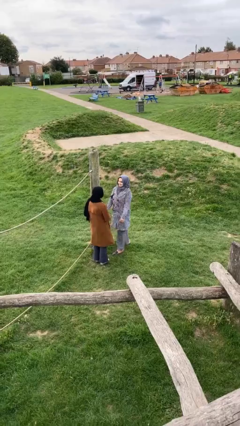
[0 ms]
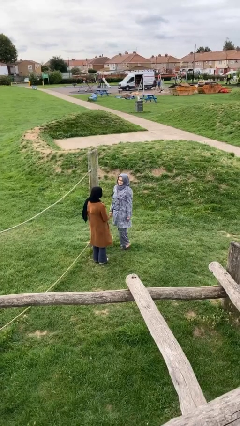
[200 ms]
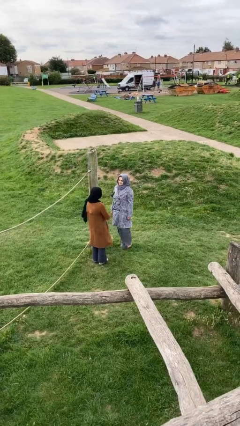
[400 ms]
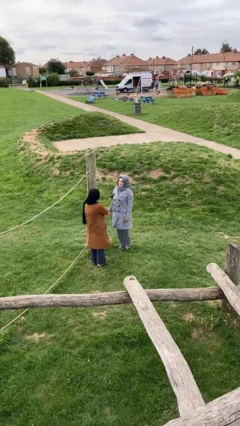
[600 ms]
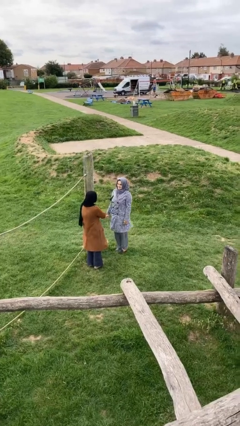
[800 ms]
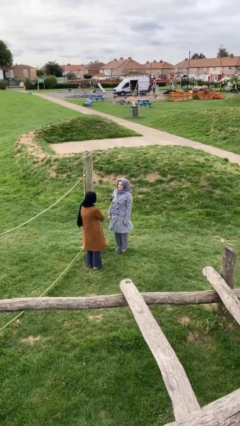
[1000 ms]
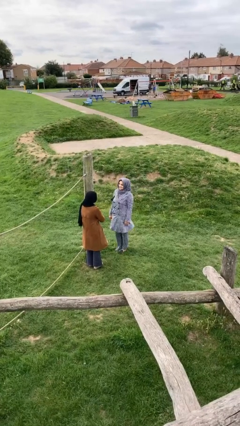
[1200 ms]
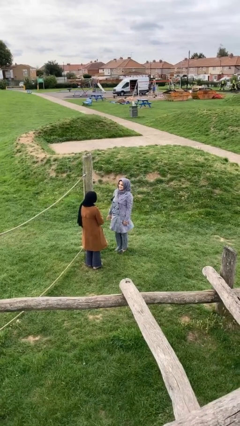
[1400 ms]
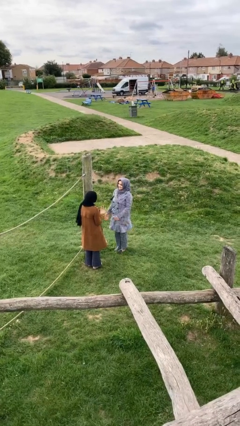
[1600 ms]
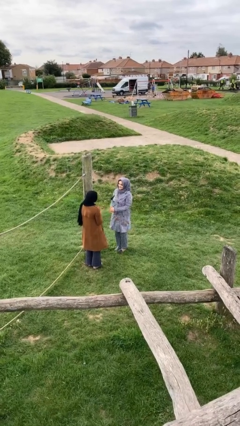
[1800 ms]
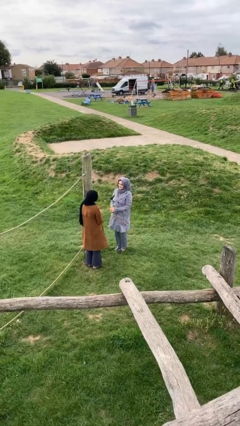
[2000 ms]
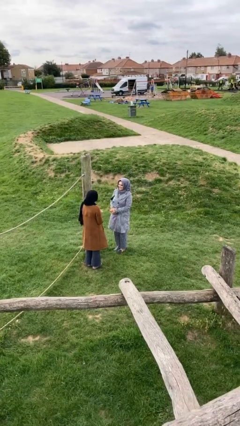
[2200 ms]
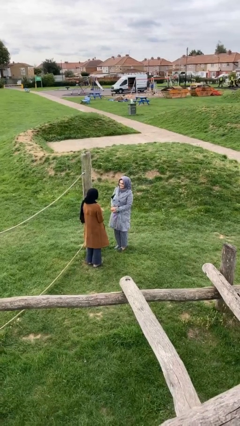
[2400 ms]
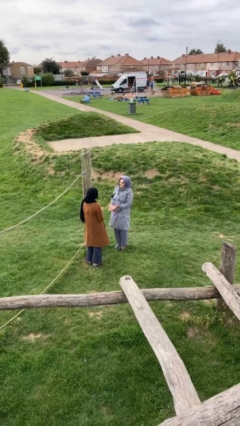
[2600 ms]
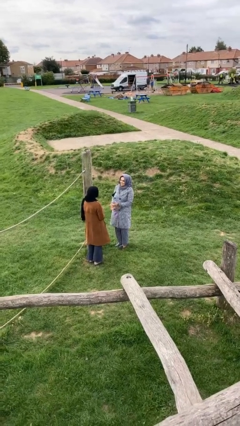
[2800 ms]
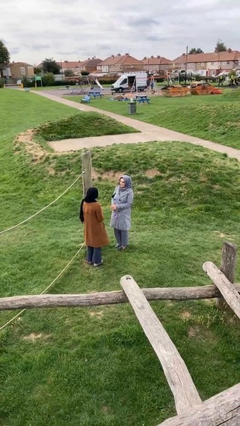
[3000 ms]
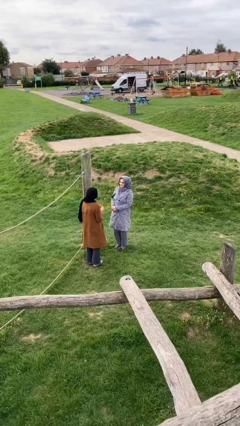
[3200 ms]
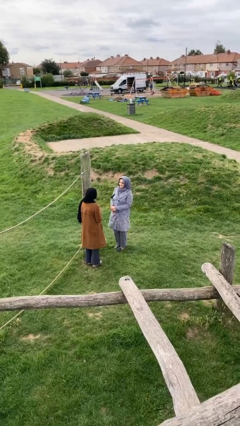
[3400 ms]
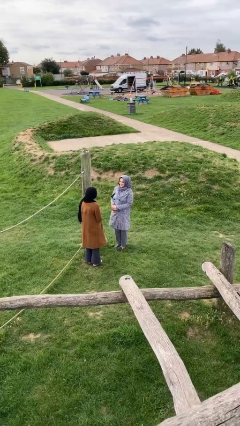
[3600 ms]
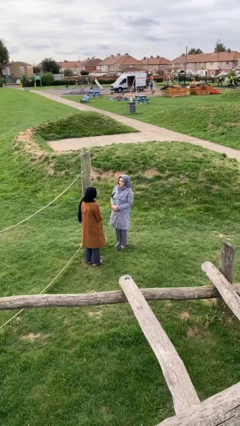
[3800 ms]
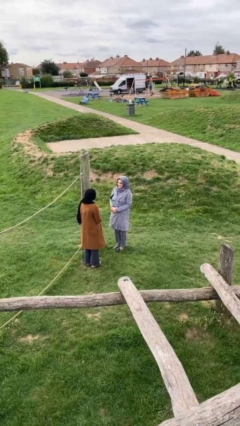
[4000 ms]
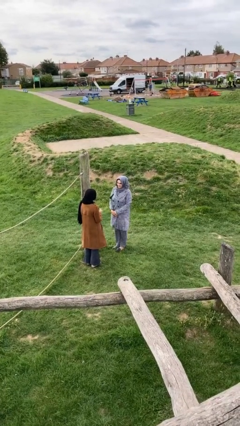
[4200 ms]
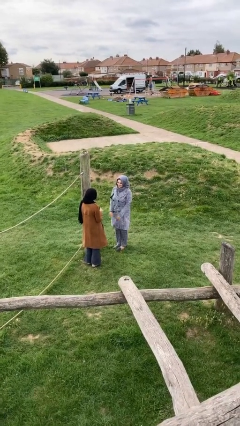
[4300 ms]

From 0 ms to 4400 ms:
person talks to person

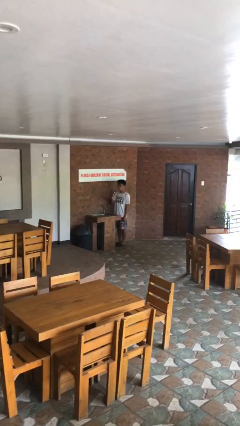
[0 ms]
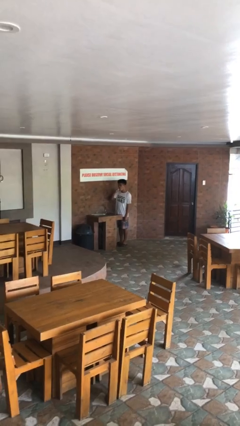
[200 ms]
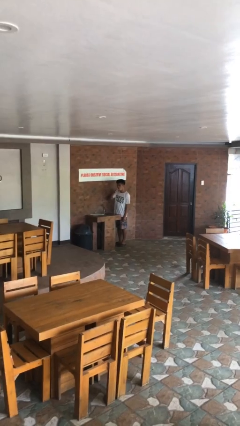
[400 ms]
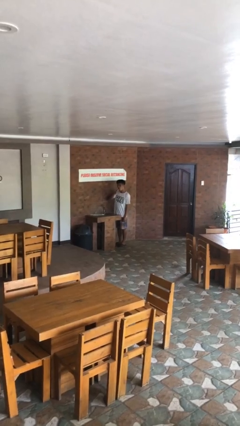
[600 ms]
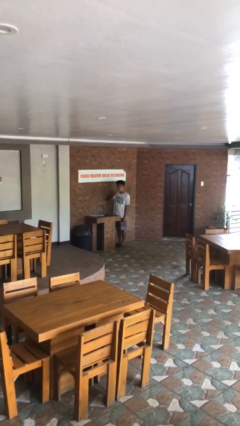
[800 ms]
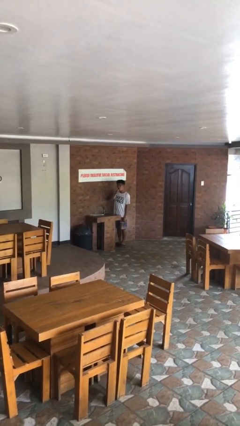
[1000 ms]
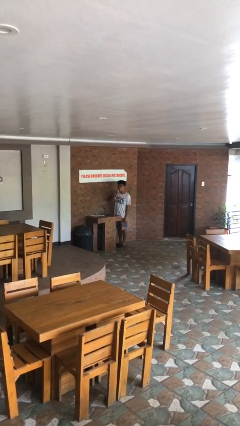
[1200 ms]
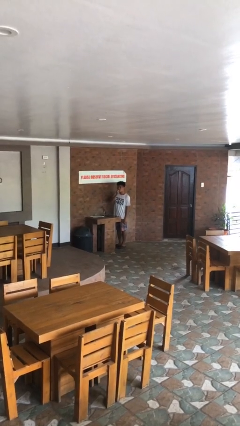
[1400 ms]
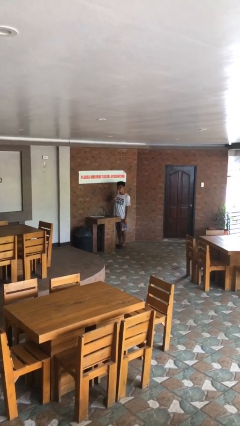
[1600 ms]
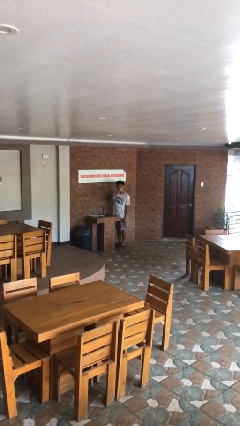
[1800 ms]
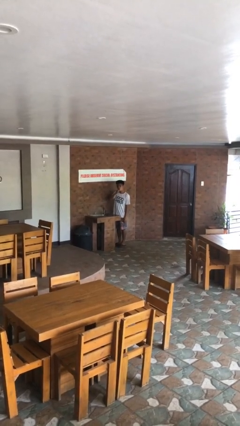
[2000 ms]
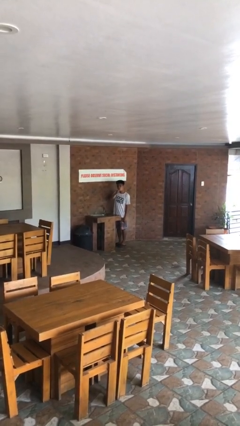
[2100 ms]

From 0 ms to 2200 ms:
person brushes teeth

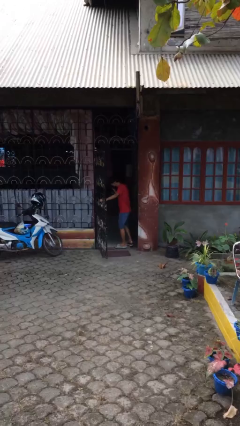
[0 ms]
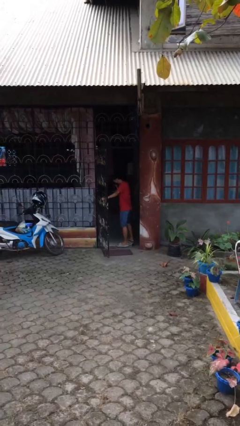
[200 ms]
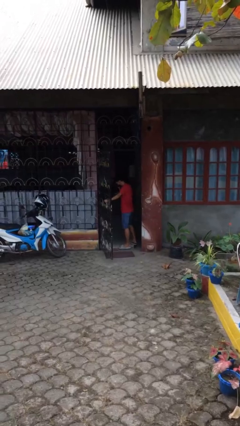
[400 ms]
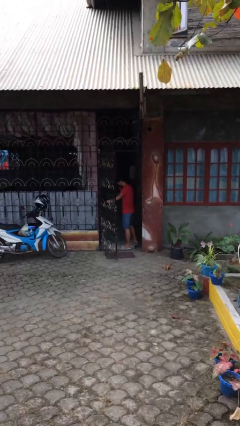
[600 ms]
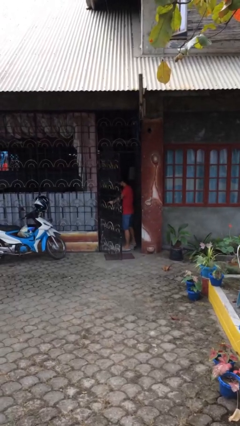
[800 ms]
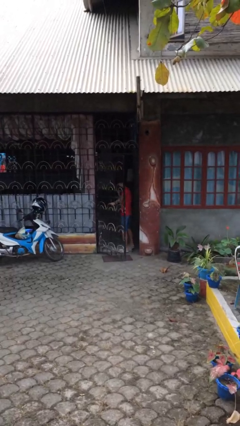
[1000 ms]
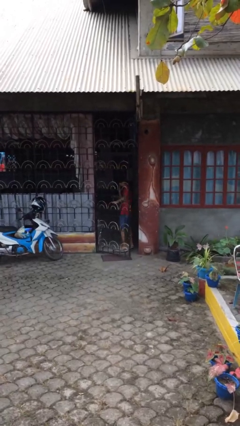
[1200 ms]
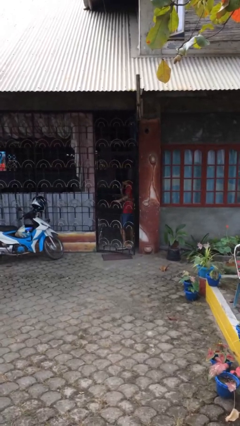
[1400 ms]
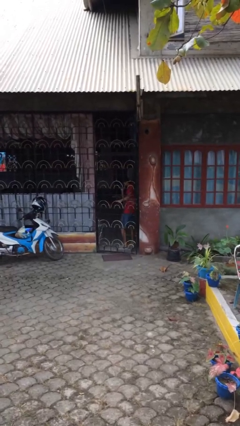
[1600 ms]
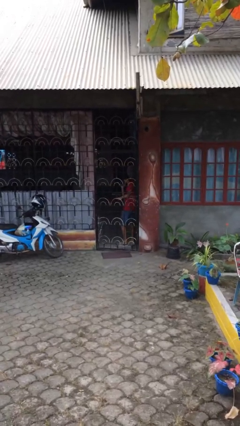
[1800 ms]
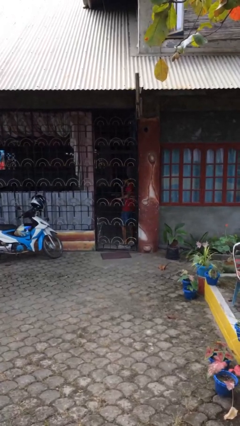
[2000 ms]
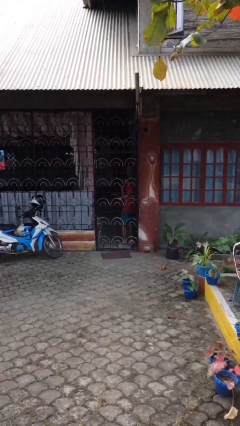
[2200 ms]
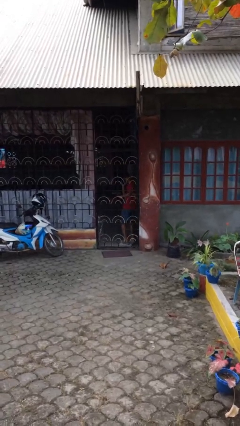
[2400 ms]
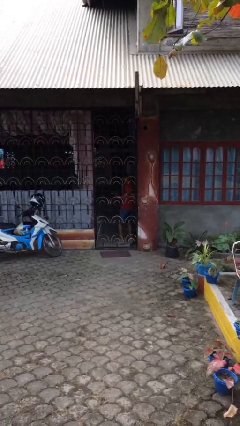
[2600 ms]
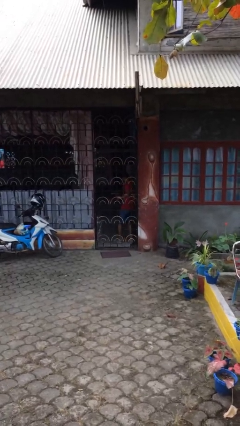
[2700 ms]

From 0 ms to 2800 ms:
person closes facility door

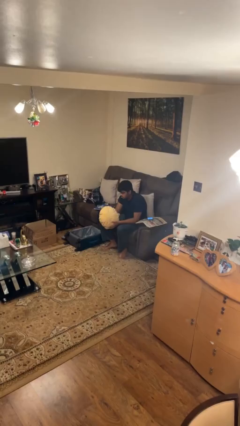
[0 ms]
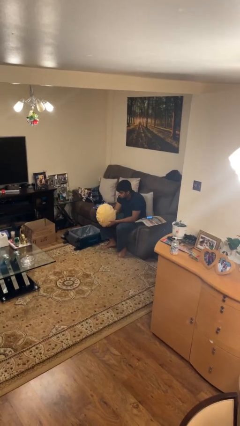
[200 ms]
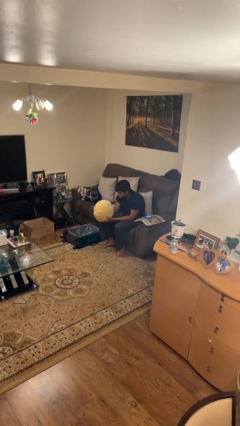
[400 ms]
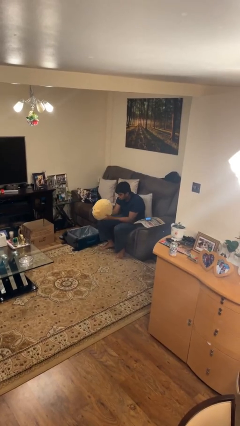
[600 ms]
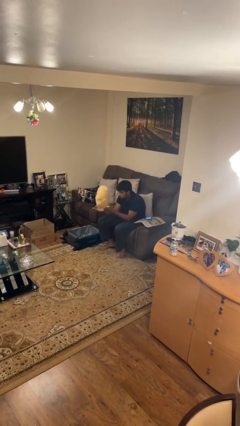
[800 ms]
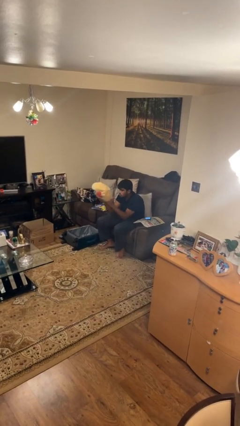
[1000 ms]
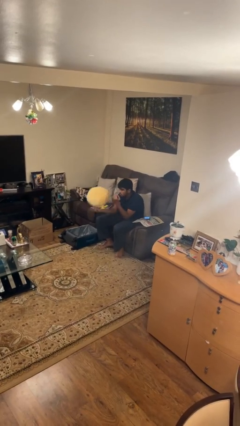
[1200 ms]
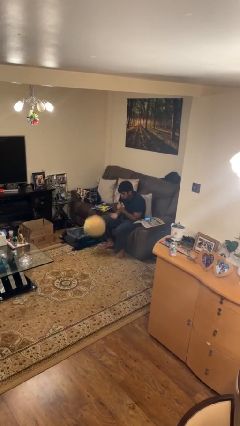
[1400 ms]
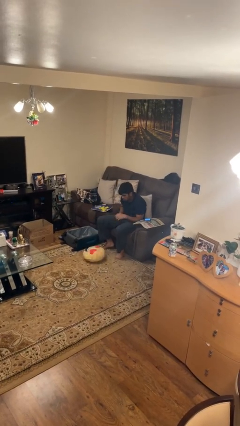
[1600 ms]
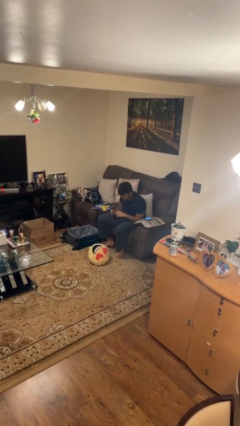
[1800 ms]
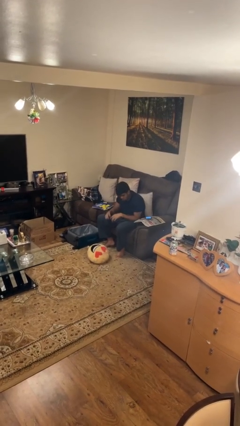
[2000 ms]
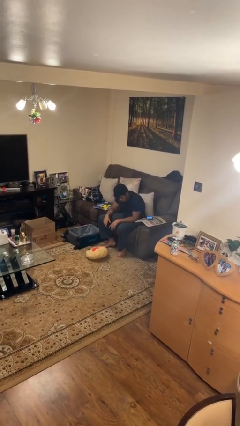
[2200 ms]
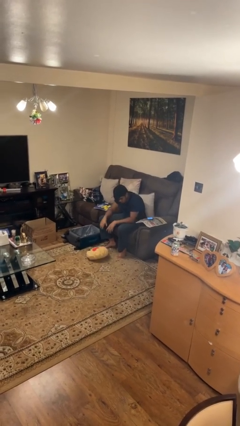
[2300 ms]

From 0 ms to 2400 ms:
person drops object

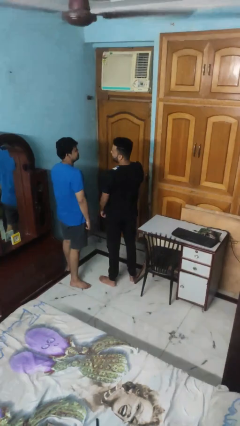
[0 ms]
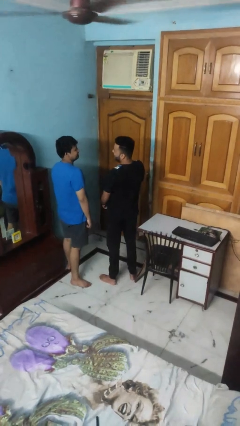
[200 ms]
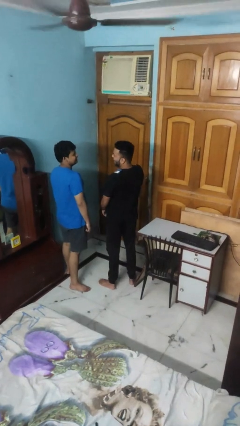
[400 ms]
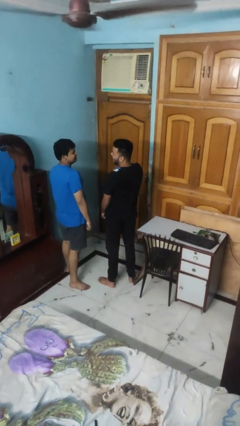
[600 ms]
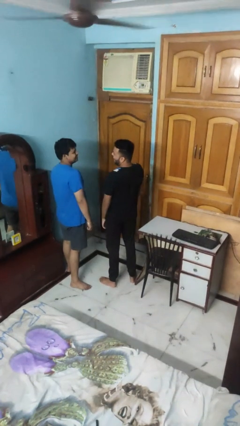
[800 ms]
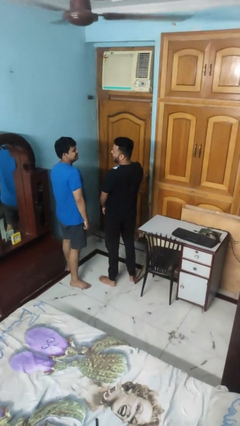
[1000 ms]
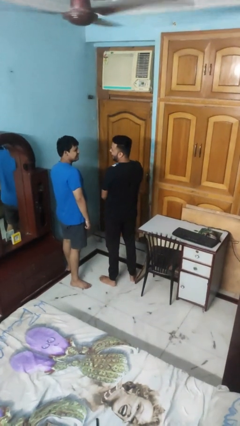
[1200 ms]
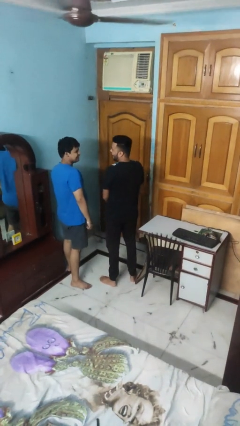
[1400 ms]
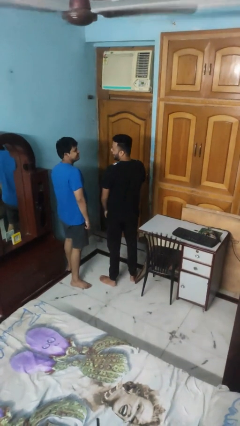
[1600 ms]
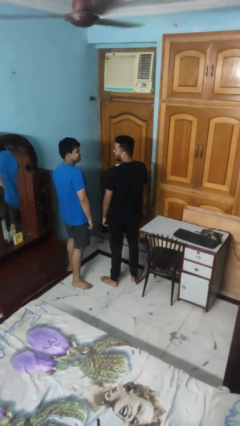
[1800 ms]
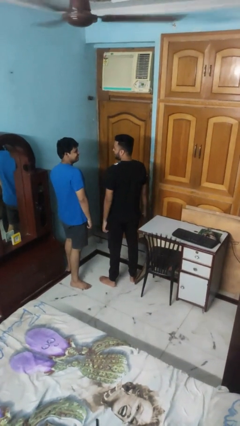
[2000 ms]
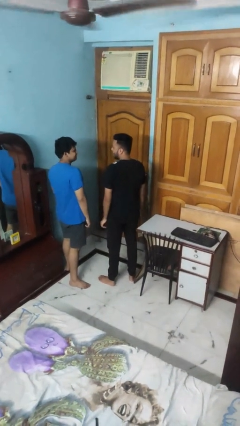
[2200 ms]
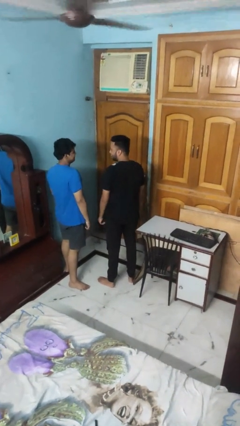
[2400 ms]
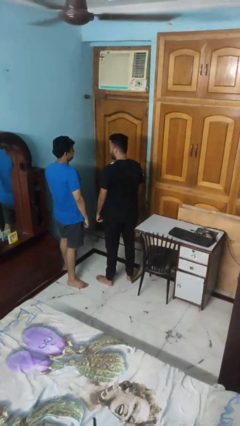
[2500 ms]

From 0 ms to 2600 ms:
person laughs with person

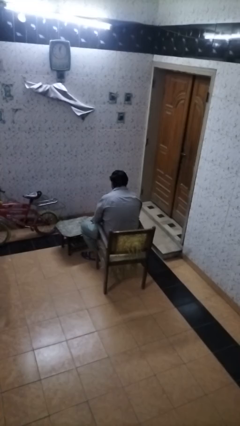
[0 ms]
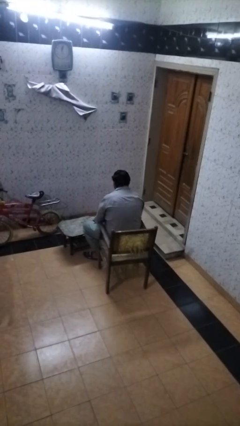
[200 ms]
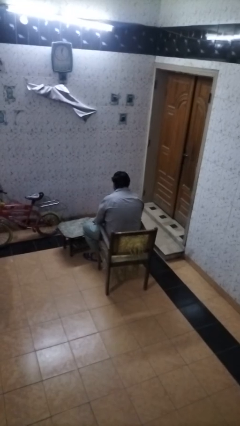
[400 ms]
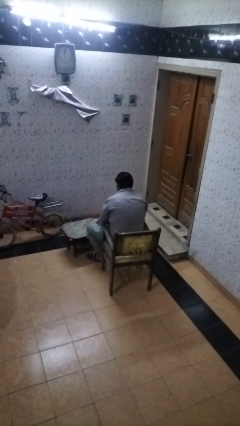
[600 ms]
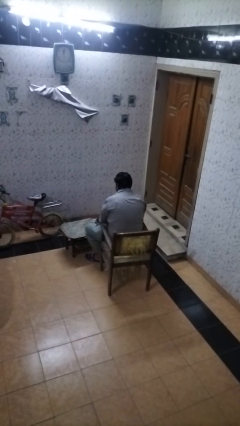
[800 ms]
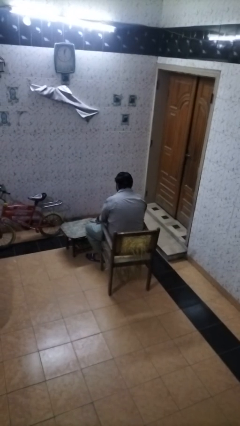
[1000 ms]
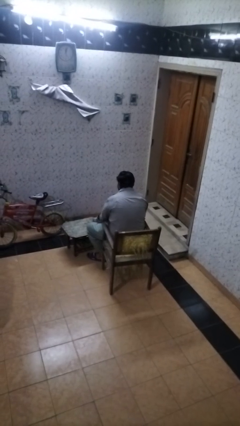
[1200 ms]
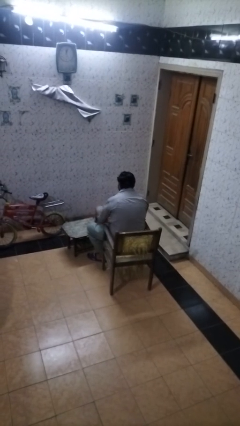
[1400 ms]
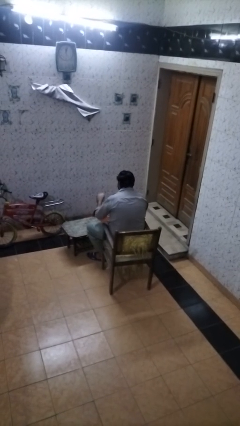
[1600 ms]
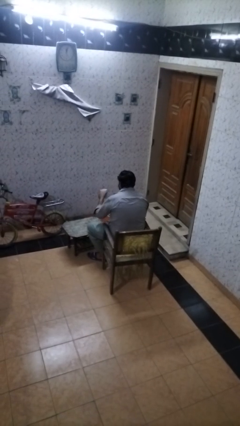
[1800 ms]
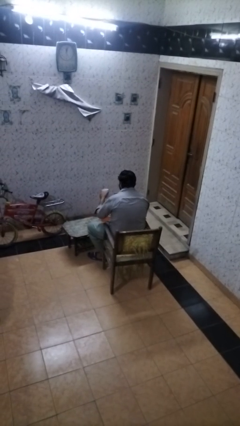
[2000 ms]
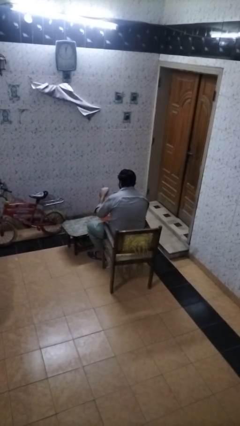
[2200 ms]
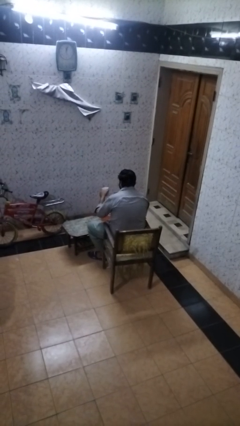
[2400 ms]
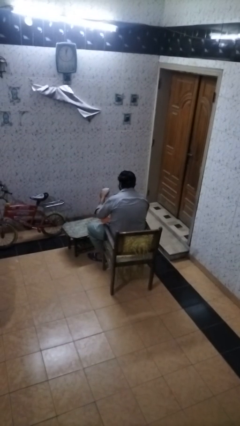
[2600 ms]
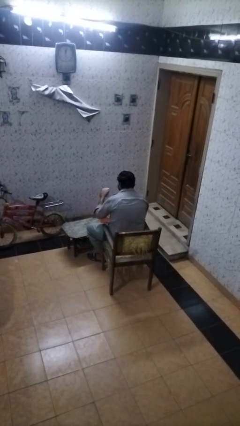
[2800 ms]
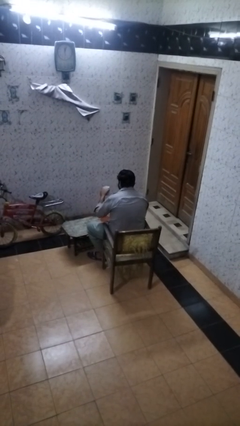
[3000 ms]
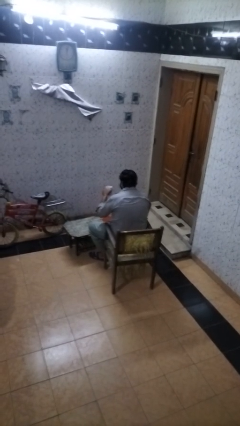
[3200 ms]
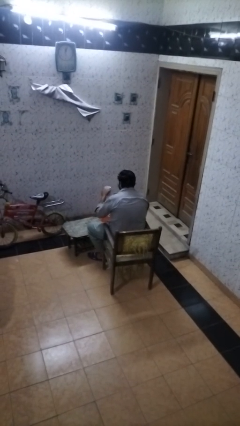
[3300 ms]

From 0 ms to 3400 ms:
person picks up object from table
